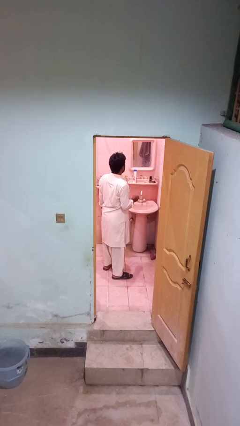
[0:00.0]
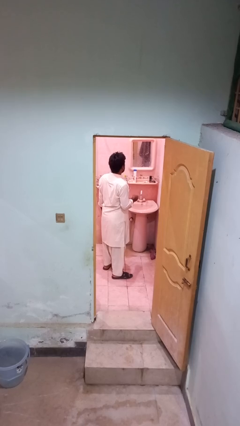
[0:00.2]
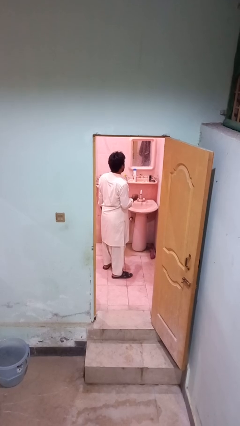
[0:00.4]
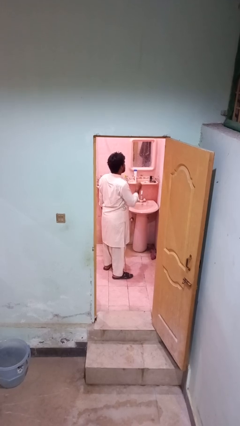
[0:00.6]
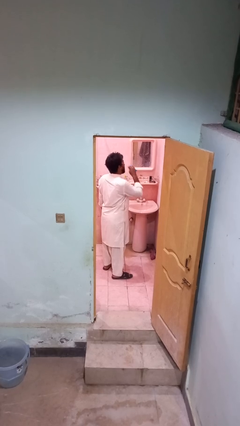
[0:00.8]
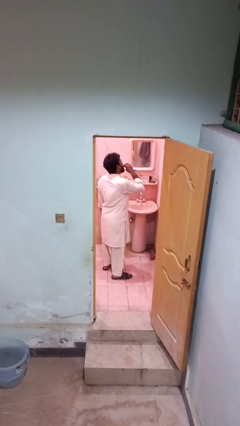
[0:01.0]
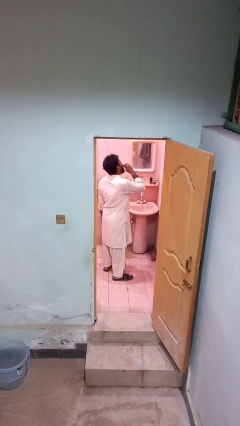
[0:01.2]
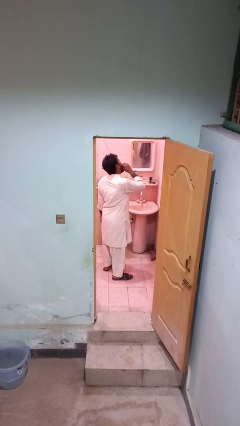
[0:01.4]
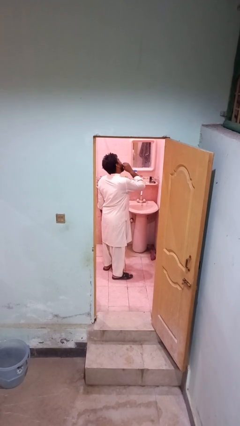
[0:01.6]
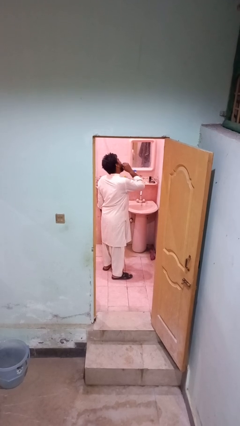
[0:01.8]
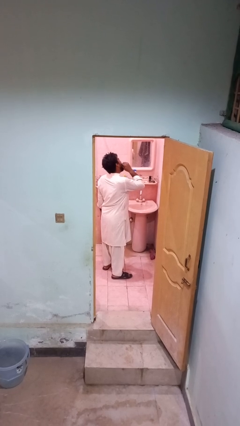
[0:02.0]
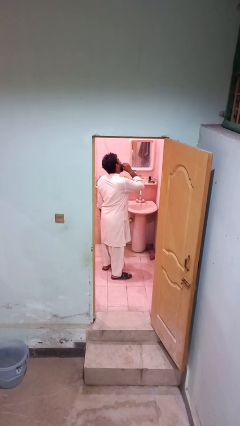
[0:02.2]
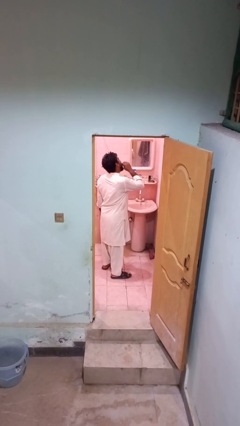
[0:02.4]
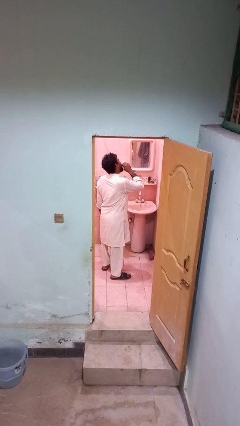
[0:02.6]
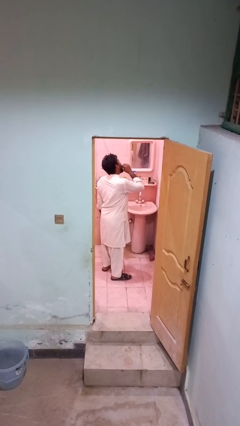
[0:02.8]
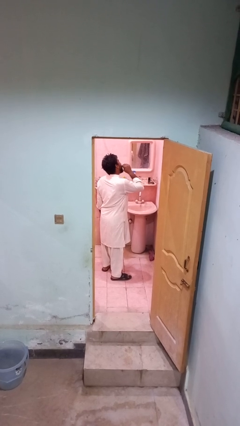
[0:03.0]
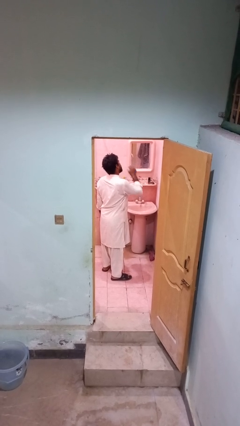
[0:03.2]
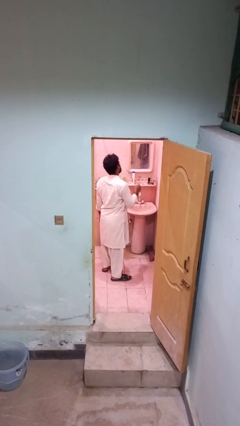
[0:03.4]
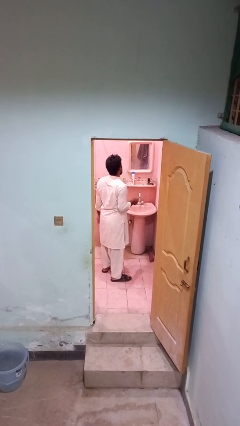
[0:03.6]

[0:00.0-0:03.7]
person flosses

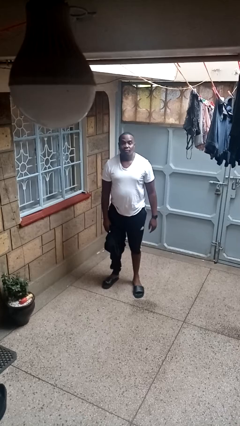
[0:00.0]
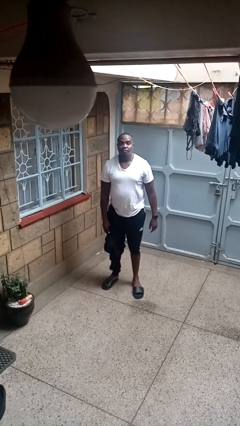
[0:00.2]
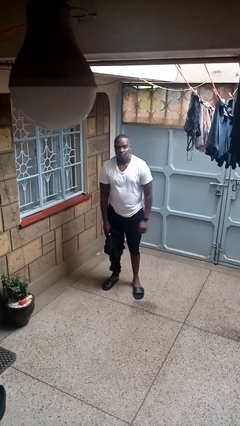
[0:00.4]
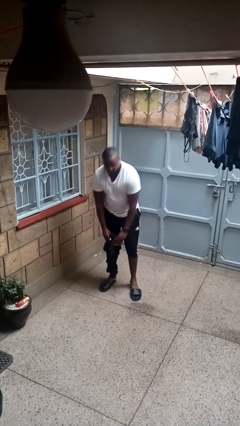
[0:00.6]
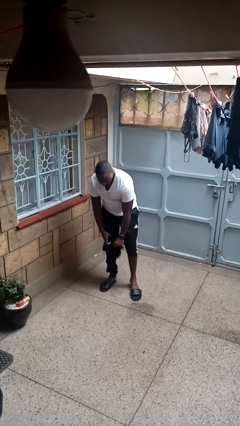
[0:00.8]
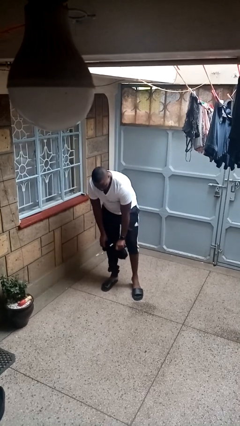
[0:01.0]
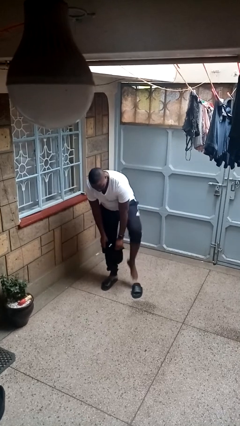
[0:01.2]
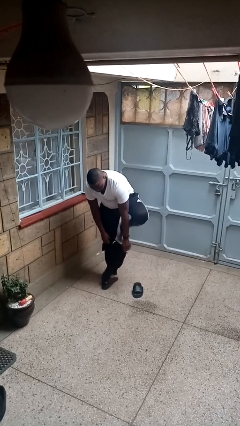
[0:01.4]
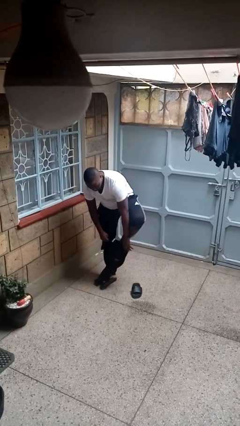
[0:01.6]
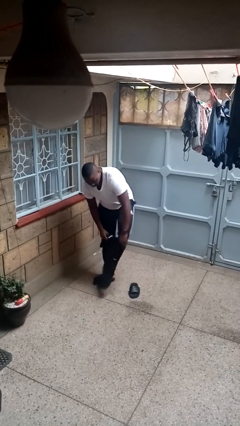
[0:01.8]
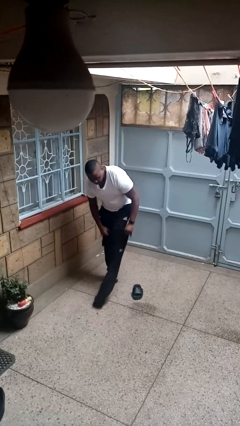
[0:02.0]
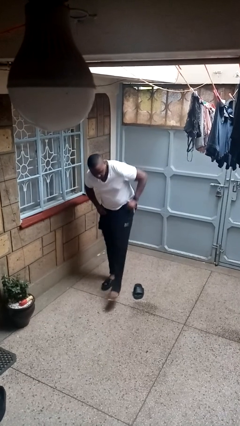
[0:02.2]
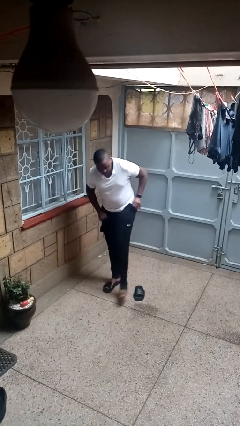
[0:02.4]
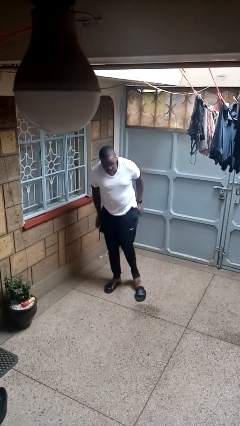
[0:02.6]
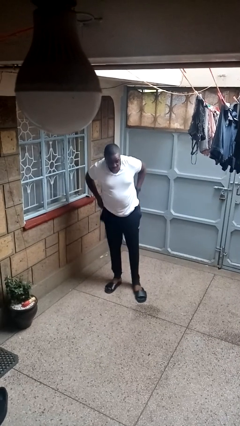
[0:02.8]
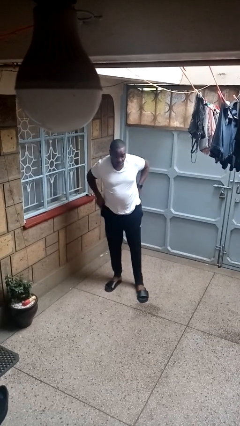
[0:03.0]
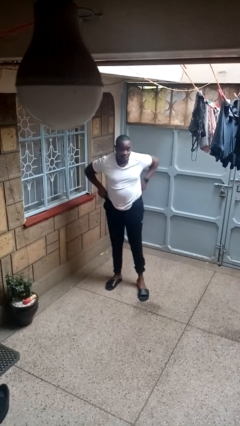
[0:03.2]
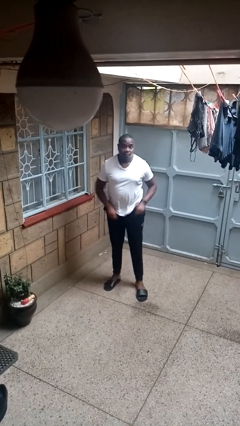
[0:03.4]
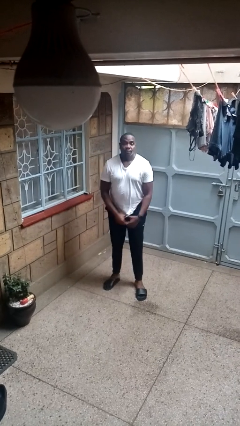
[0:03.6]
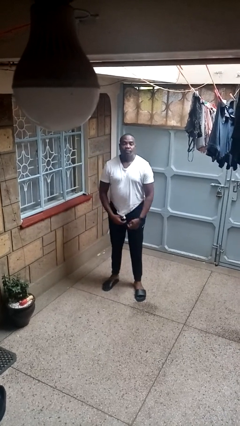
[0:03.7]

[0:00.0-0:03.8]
person puts on pants

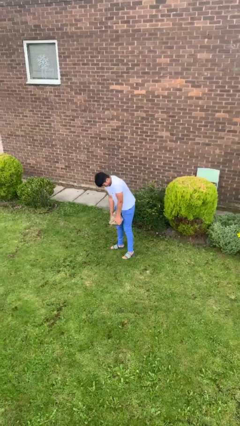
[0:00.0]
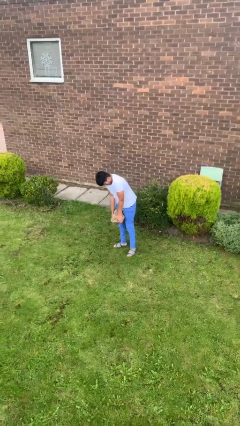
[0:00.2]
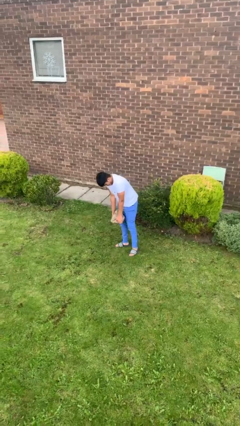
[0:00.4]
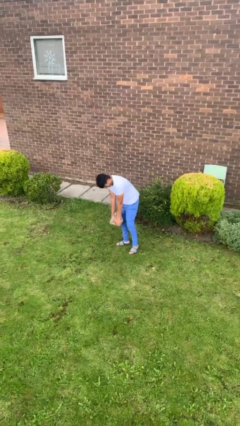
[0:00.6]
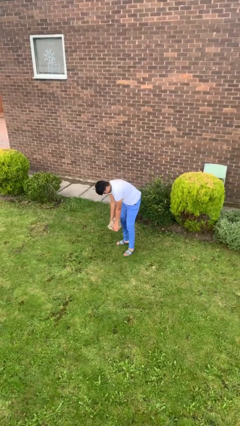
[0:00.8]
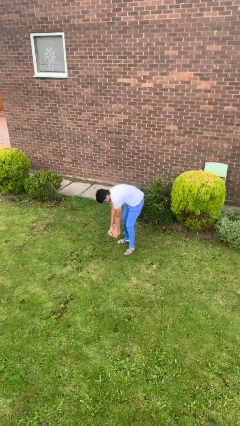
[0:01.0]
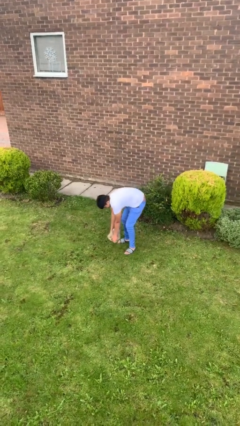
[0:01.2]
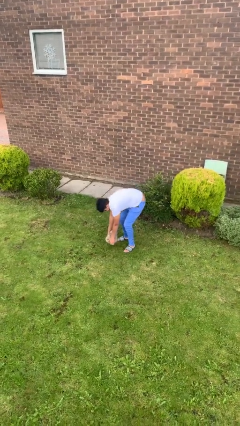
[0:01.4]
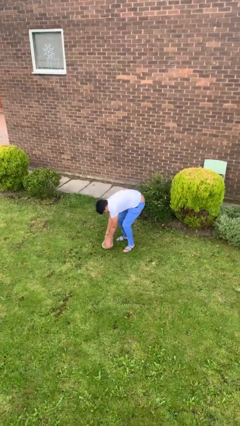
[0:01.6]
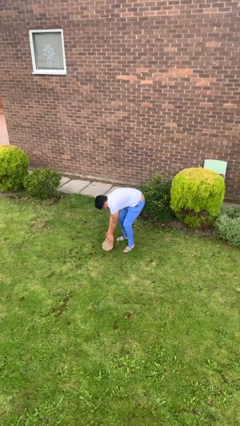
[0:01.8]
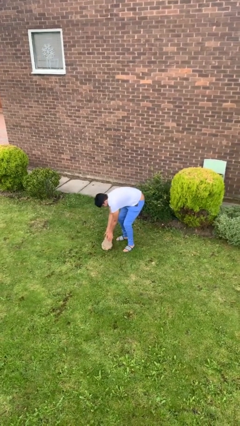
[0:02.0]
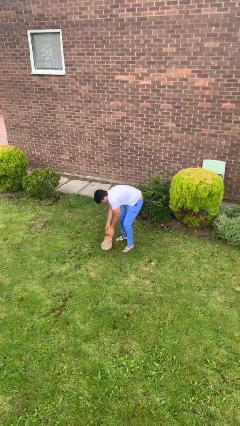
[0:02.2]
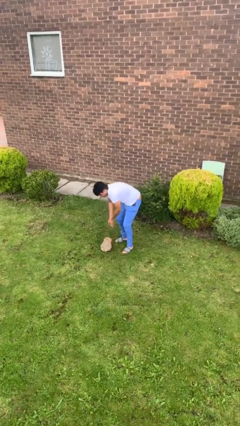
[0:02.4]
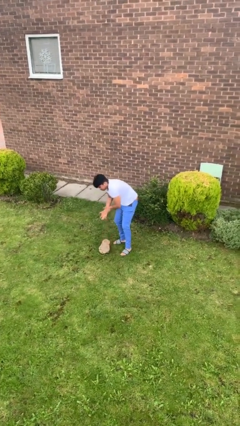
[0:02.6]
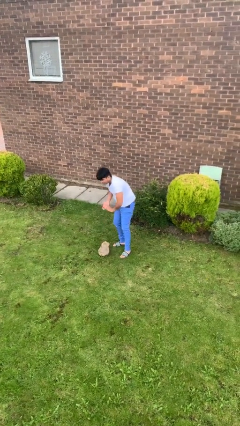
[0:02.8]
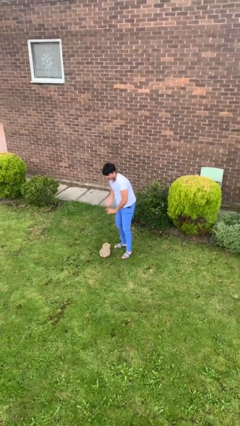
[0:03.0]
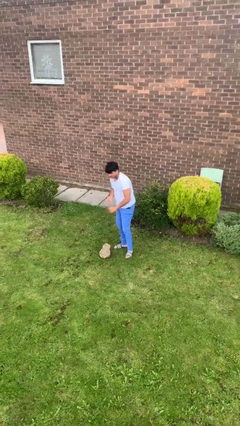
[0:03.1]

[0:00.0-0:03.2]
person puts down object on floor

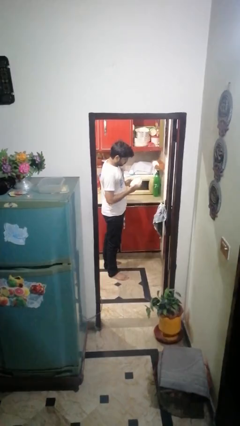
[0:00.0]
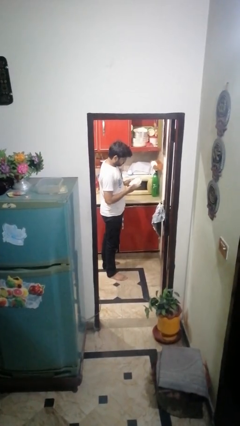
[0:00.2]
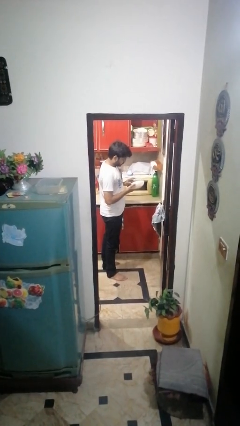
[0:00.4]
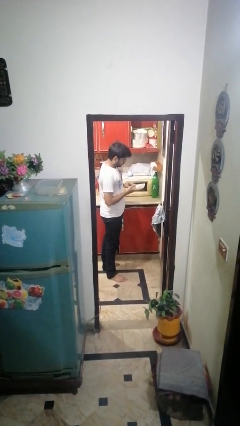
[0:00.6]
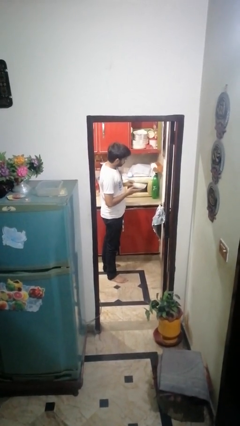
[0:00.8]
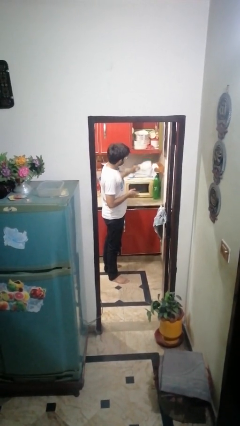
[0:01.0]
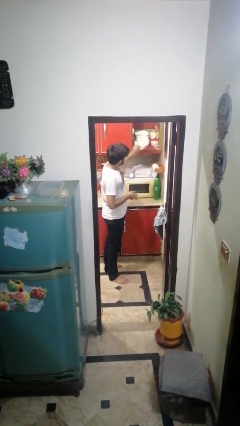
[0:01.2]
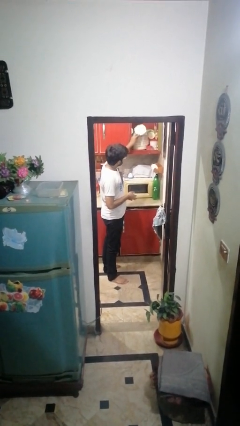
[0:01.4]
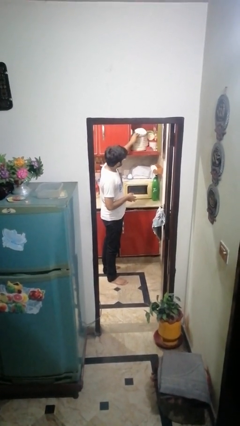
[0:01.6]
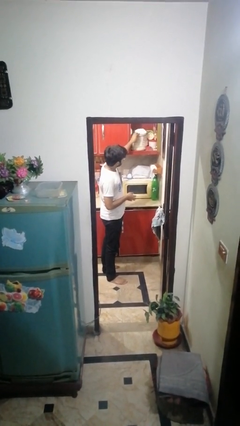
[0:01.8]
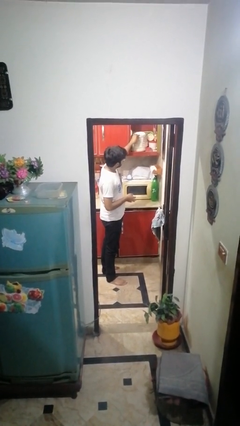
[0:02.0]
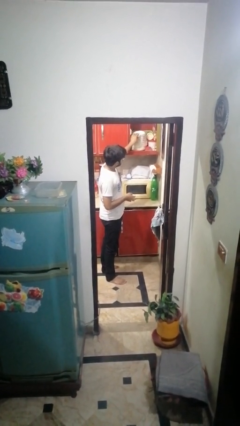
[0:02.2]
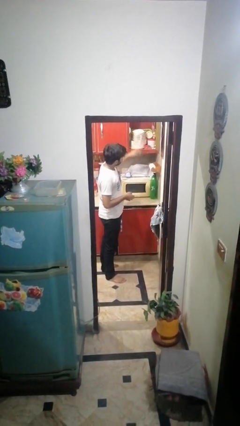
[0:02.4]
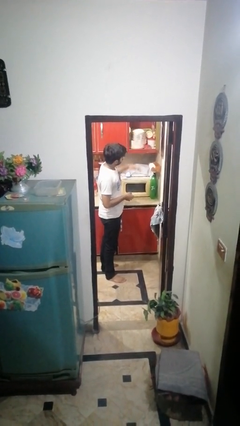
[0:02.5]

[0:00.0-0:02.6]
person puts down object into cabinet

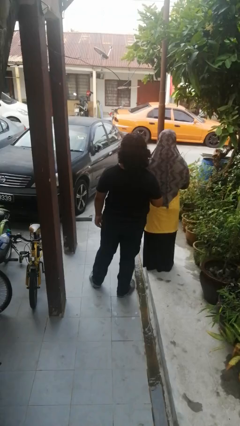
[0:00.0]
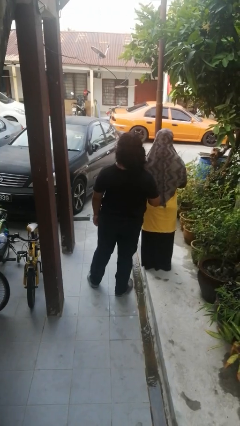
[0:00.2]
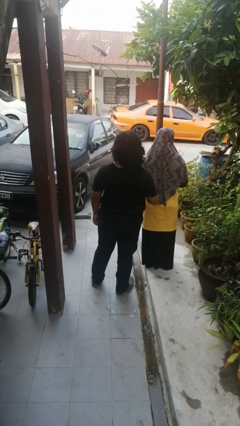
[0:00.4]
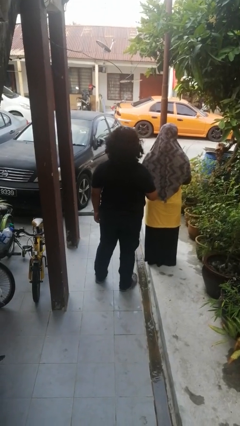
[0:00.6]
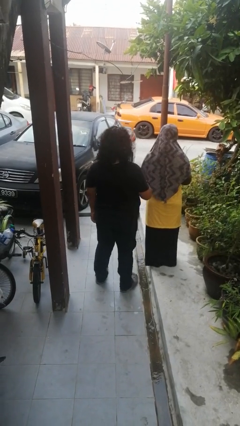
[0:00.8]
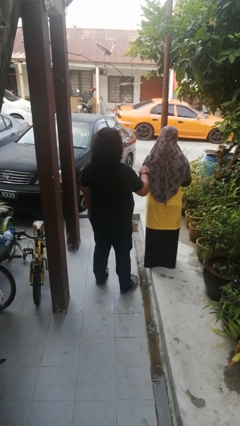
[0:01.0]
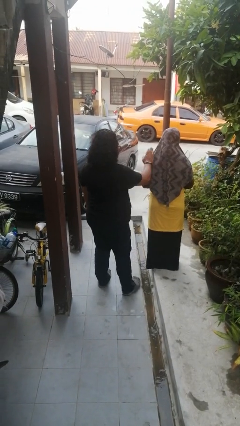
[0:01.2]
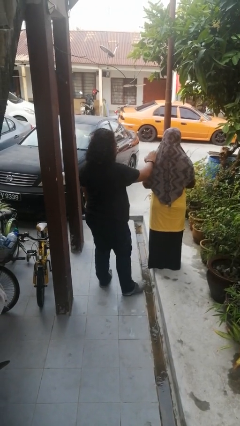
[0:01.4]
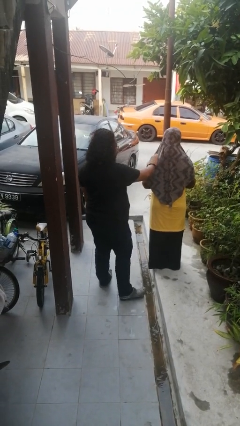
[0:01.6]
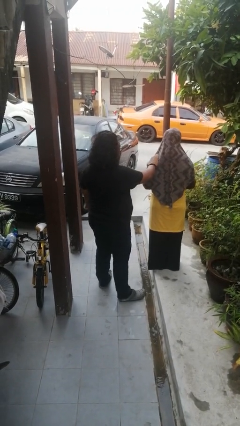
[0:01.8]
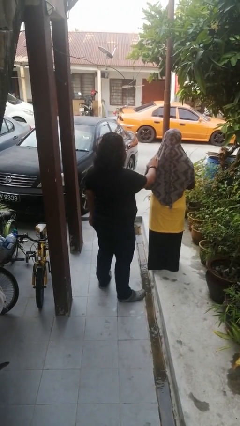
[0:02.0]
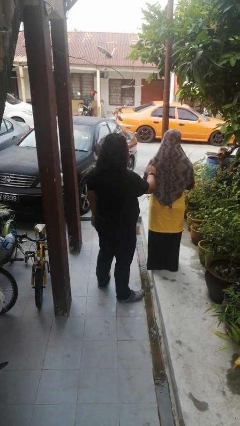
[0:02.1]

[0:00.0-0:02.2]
person touches back of person

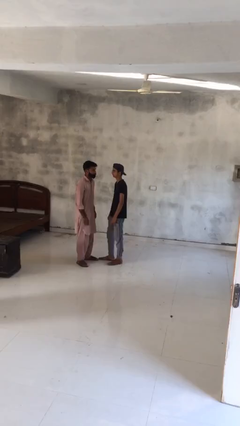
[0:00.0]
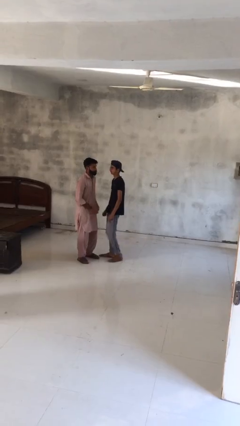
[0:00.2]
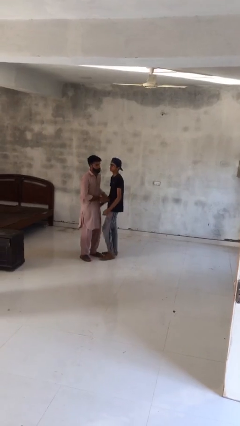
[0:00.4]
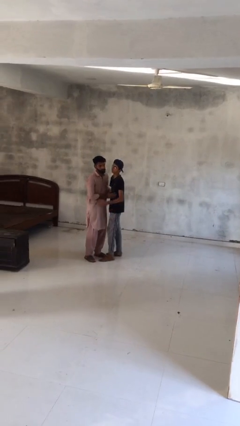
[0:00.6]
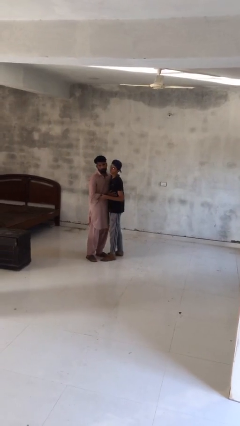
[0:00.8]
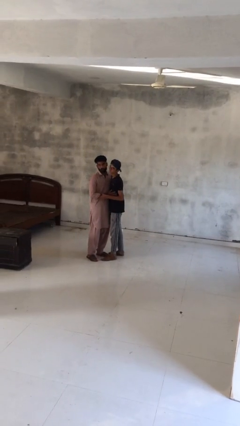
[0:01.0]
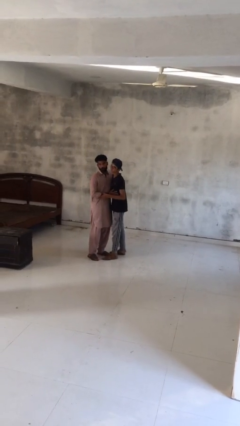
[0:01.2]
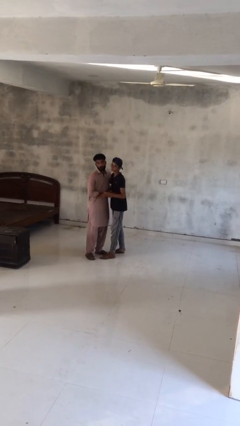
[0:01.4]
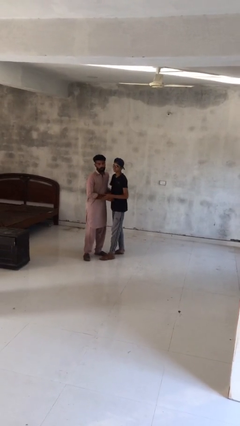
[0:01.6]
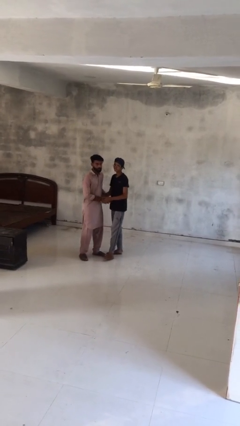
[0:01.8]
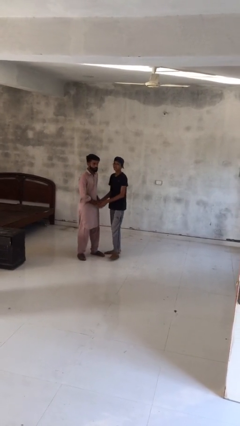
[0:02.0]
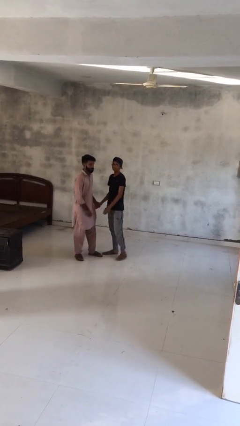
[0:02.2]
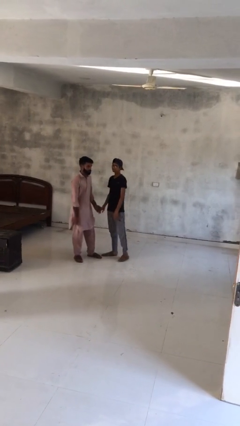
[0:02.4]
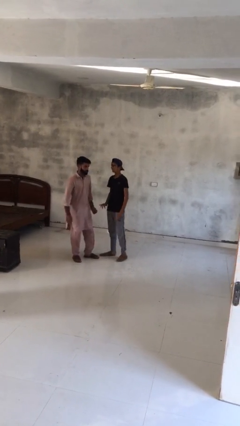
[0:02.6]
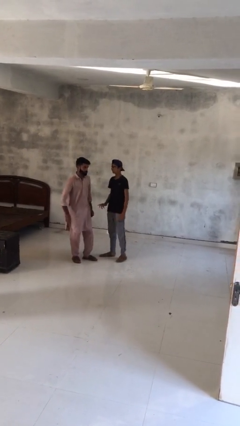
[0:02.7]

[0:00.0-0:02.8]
person embraces person
